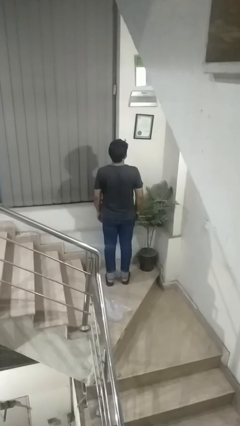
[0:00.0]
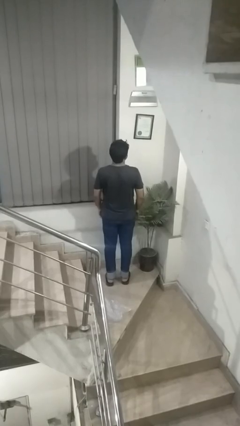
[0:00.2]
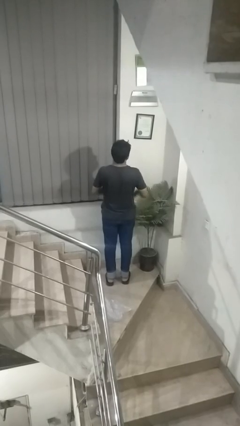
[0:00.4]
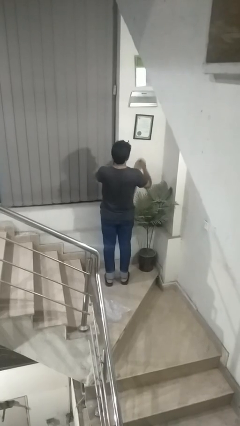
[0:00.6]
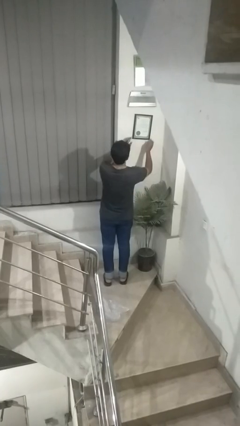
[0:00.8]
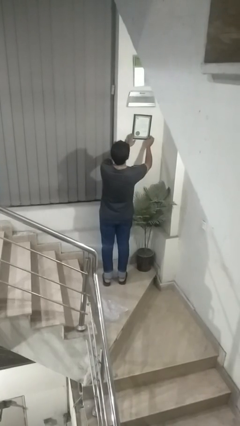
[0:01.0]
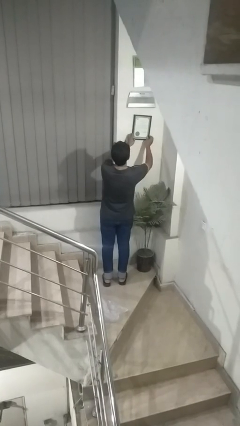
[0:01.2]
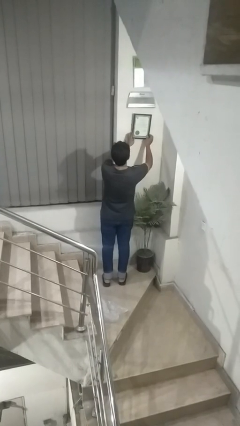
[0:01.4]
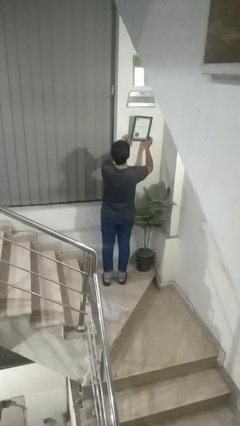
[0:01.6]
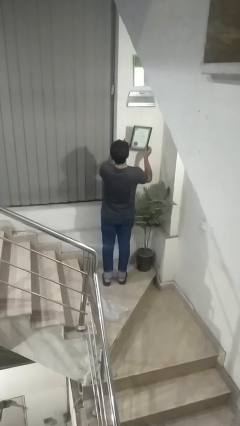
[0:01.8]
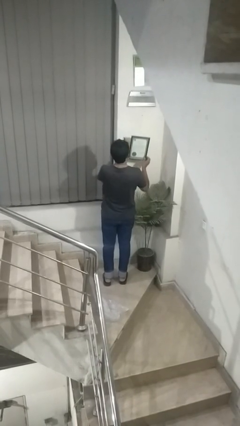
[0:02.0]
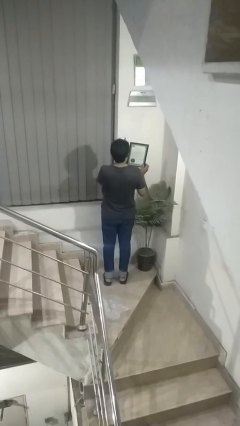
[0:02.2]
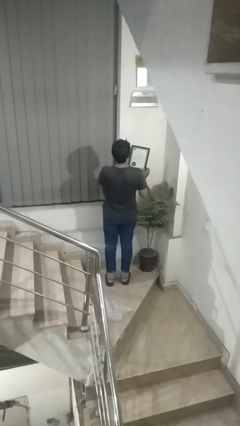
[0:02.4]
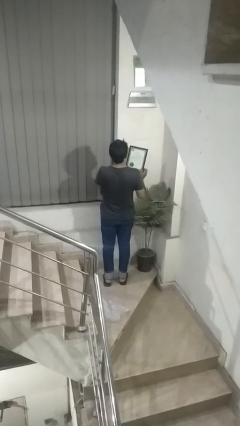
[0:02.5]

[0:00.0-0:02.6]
person takes down picture frame

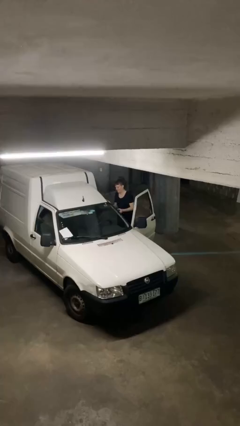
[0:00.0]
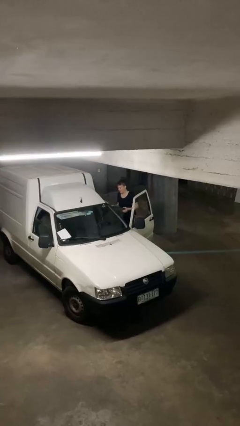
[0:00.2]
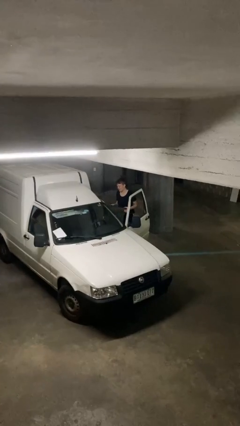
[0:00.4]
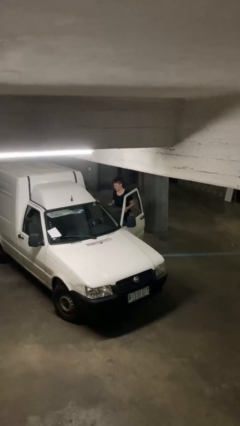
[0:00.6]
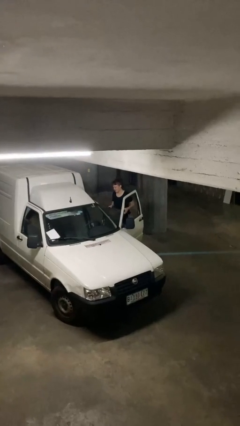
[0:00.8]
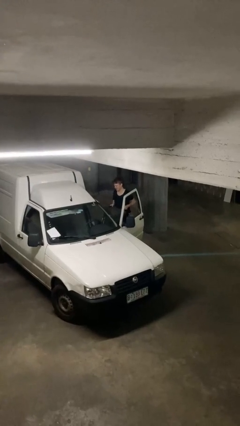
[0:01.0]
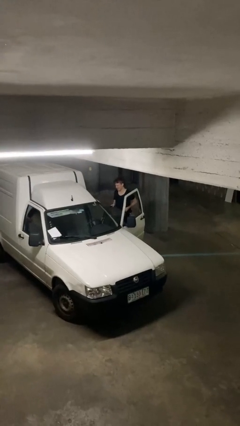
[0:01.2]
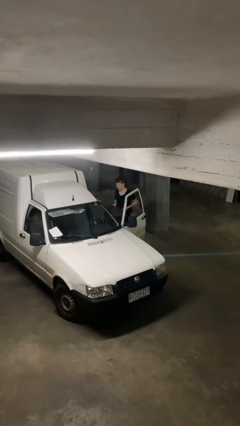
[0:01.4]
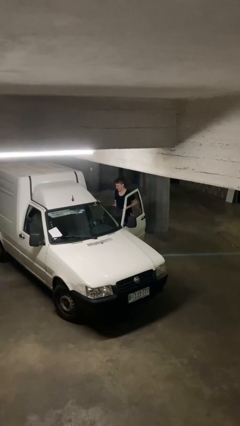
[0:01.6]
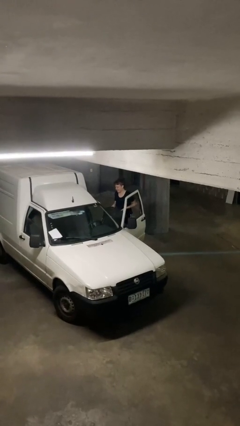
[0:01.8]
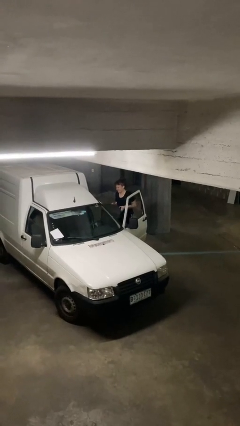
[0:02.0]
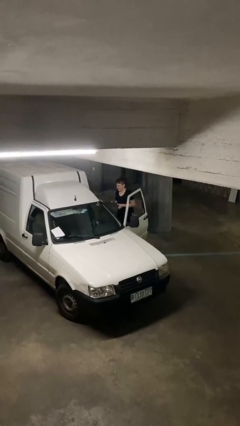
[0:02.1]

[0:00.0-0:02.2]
person unloads car

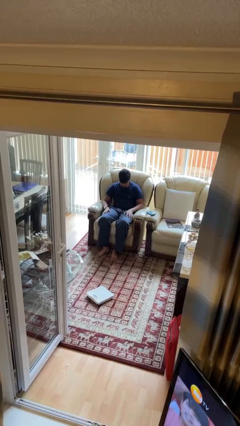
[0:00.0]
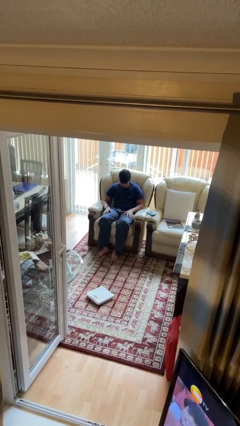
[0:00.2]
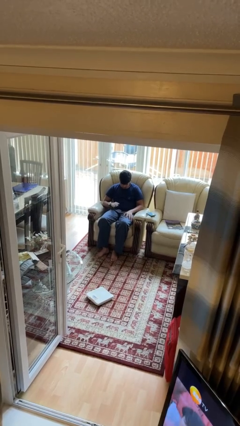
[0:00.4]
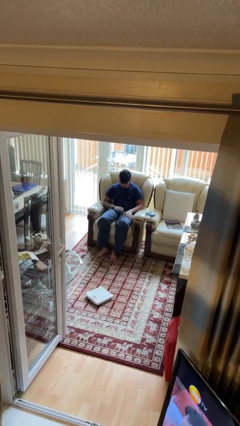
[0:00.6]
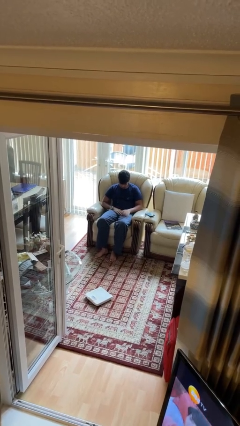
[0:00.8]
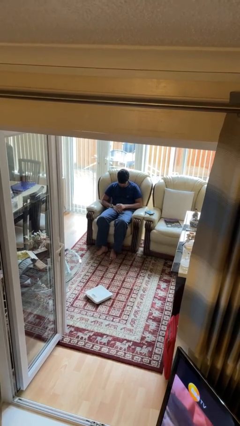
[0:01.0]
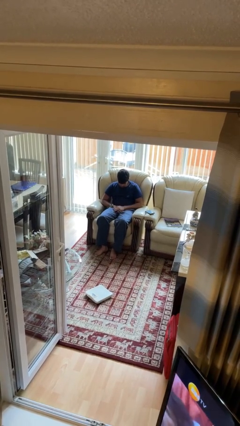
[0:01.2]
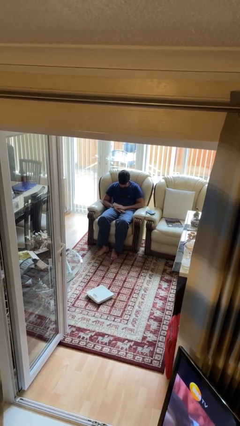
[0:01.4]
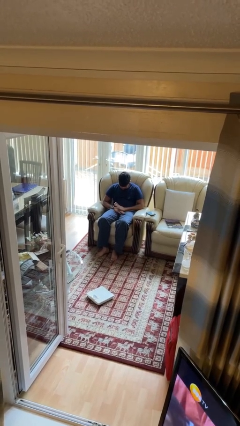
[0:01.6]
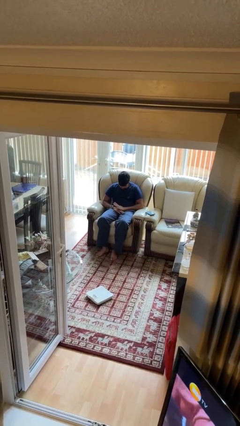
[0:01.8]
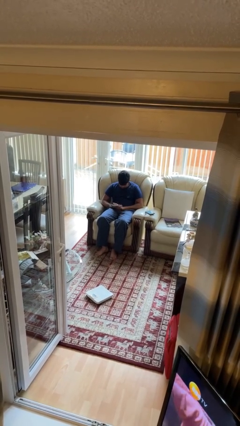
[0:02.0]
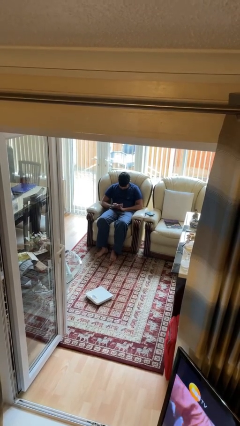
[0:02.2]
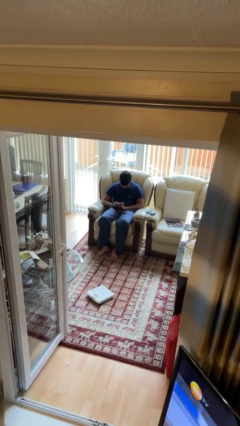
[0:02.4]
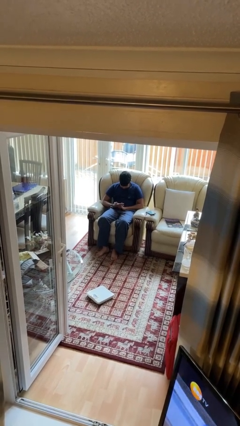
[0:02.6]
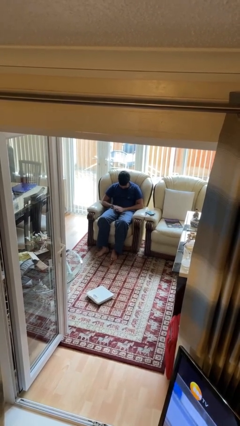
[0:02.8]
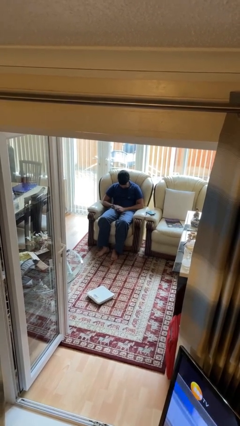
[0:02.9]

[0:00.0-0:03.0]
person looks at hands in lap

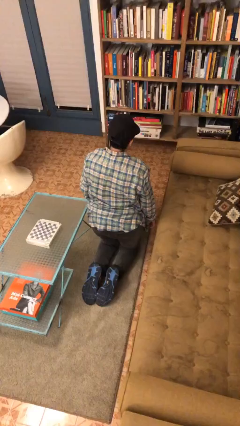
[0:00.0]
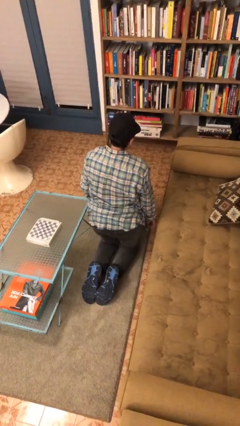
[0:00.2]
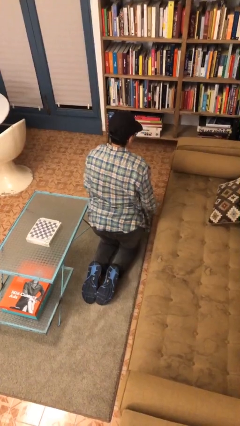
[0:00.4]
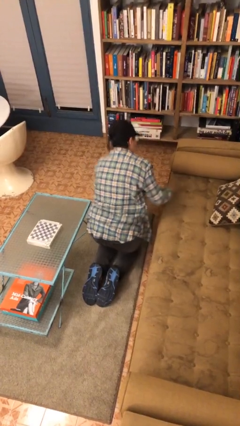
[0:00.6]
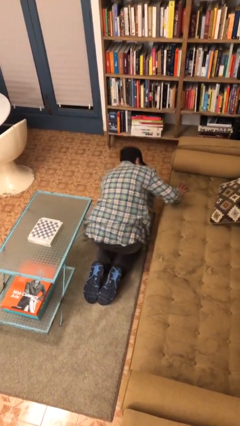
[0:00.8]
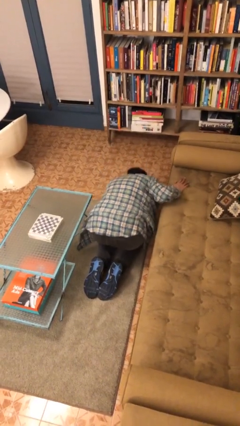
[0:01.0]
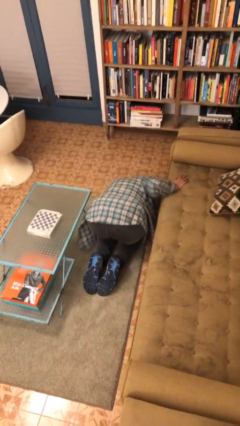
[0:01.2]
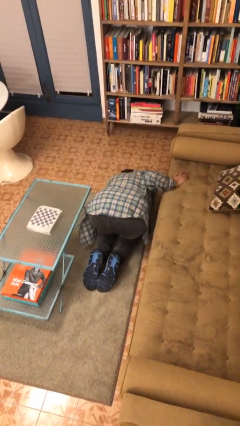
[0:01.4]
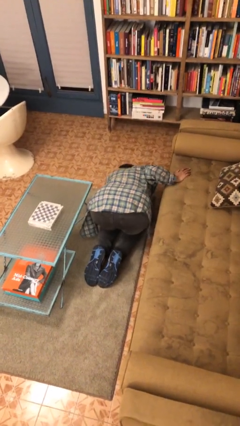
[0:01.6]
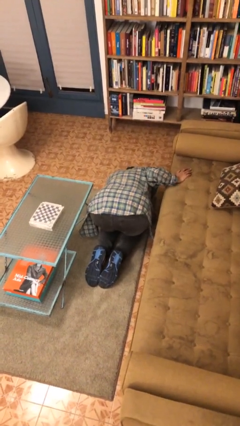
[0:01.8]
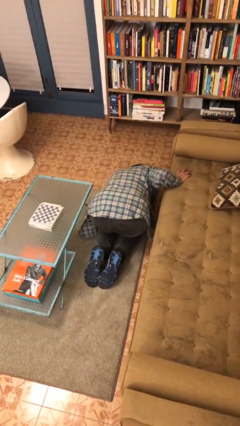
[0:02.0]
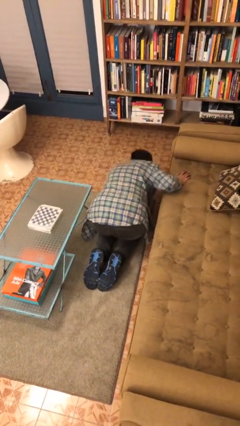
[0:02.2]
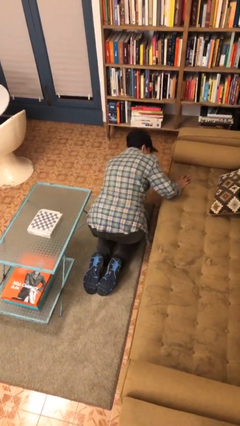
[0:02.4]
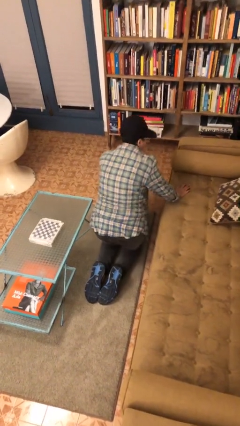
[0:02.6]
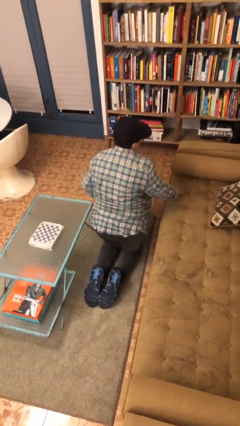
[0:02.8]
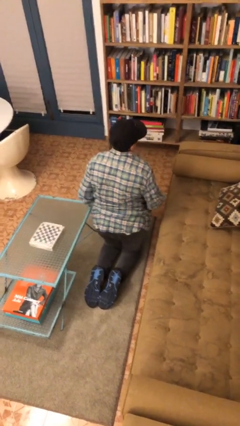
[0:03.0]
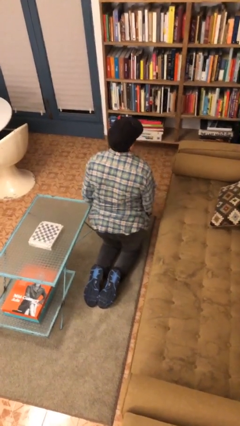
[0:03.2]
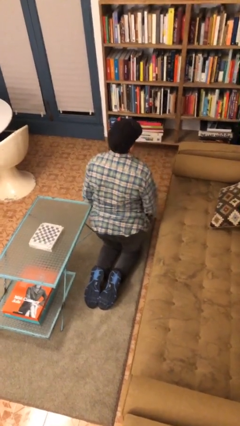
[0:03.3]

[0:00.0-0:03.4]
person searches under couch

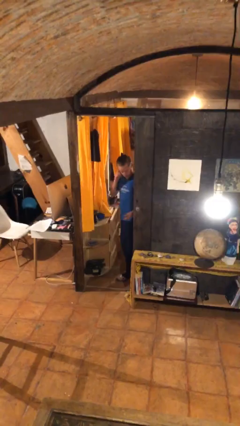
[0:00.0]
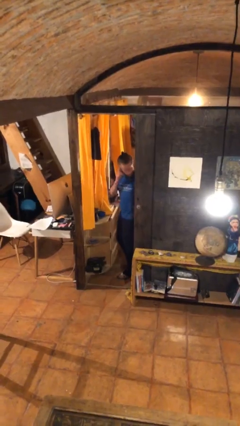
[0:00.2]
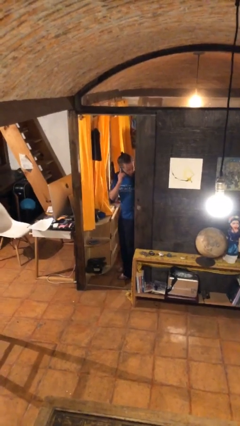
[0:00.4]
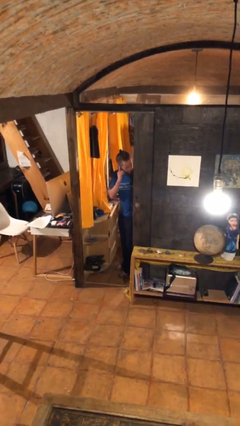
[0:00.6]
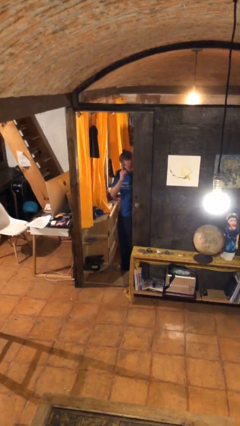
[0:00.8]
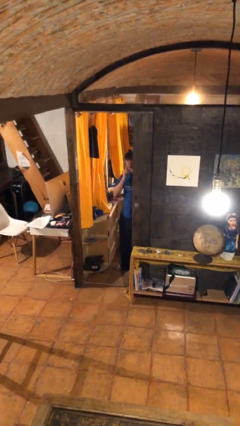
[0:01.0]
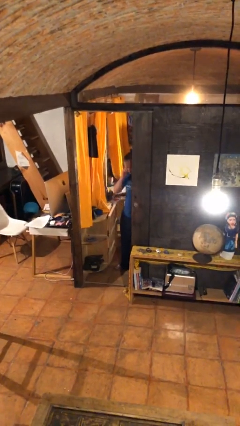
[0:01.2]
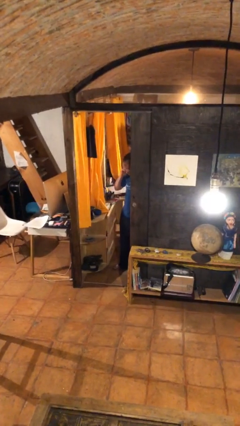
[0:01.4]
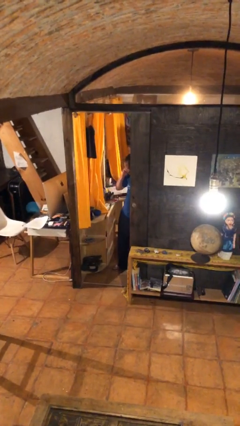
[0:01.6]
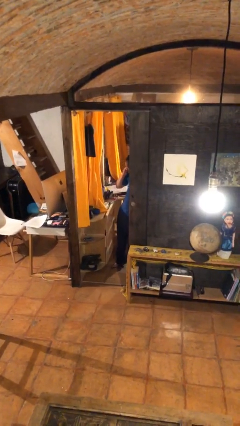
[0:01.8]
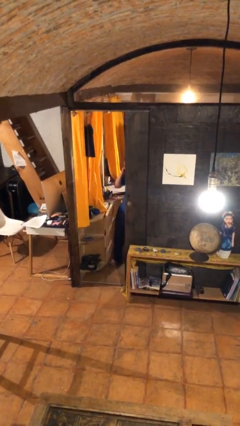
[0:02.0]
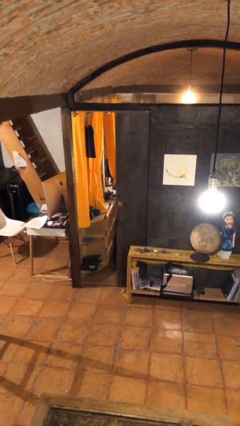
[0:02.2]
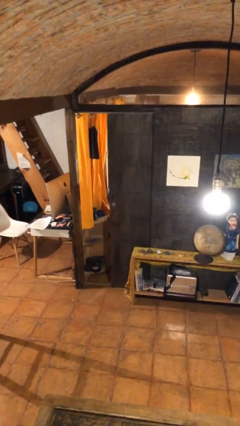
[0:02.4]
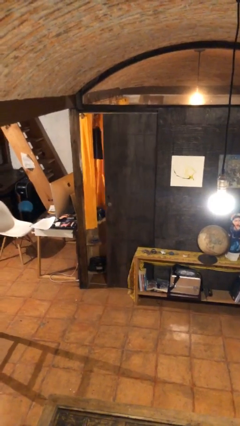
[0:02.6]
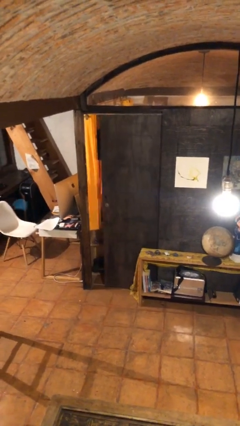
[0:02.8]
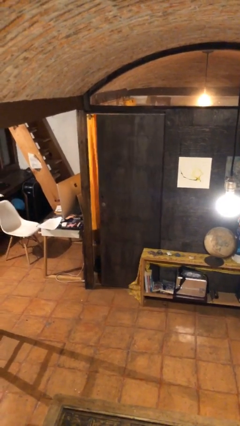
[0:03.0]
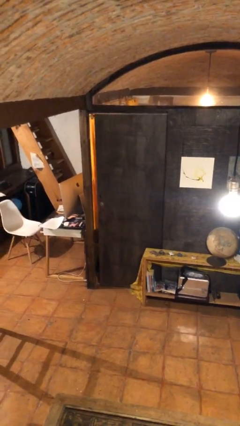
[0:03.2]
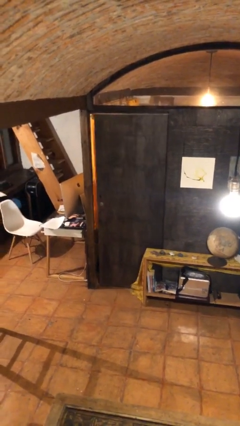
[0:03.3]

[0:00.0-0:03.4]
person closes facility door

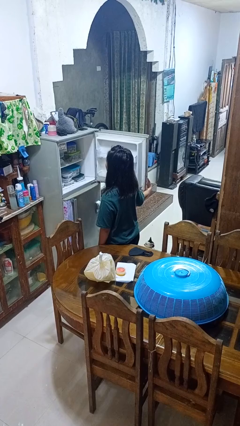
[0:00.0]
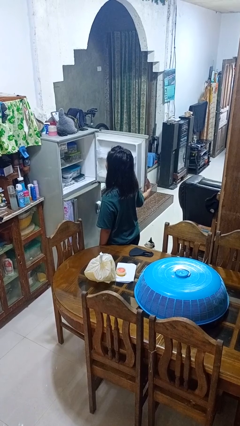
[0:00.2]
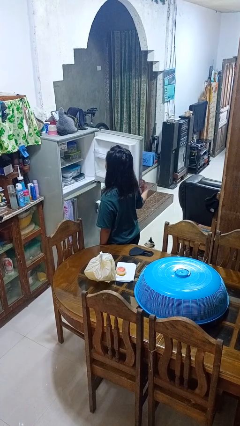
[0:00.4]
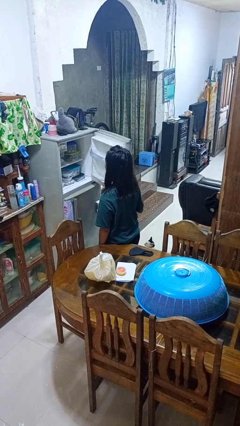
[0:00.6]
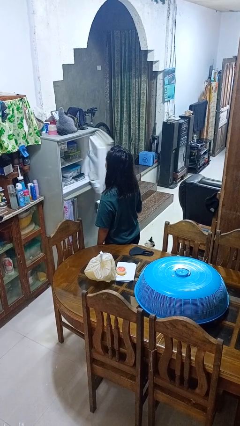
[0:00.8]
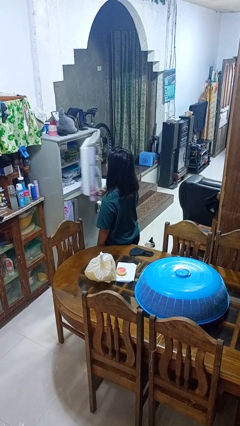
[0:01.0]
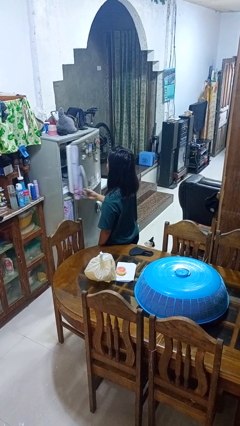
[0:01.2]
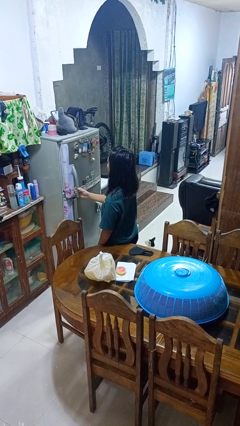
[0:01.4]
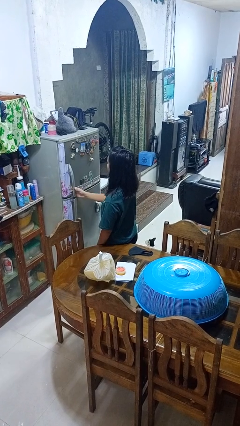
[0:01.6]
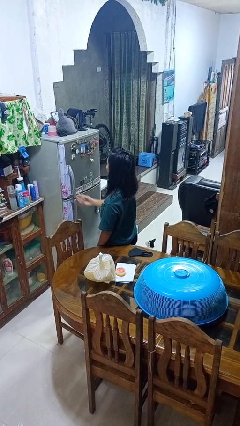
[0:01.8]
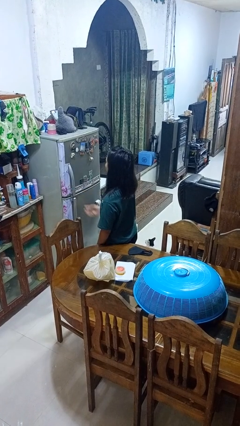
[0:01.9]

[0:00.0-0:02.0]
person closes refrigerator

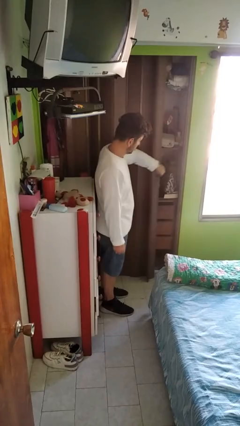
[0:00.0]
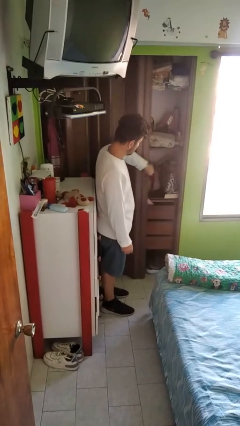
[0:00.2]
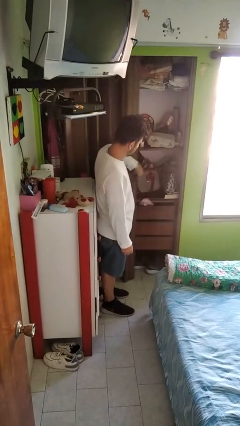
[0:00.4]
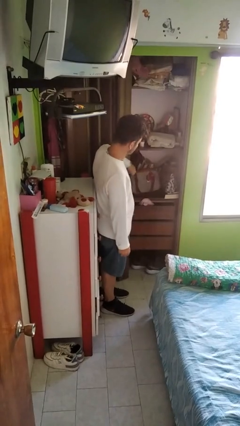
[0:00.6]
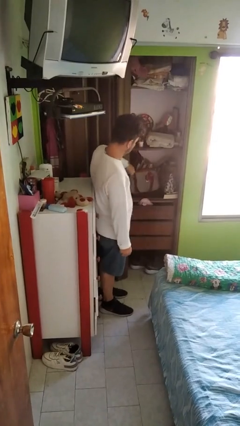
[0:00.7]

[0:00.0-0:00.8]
person opens sliding door
